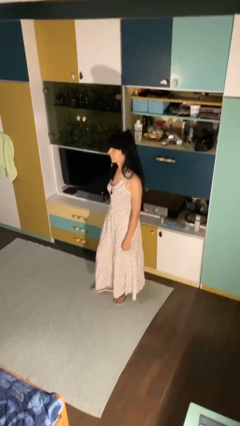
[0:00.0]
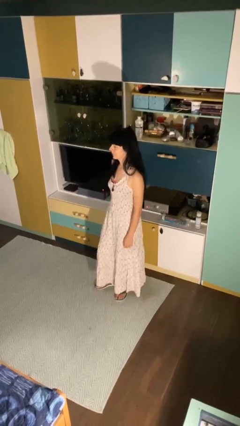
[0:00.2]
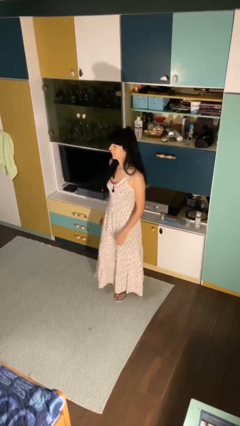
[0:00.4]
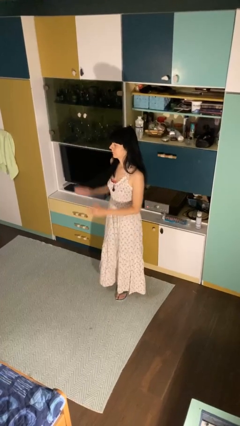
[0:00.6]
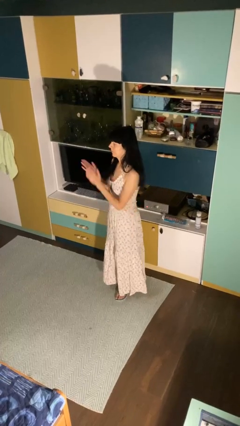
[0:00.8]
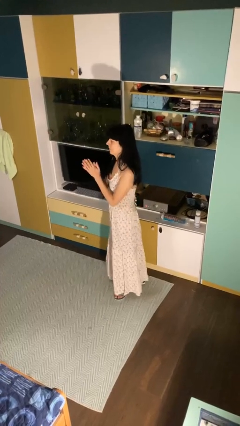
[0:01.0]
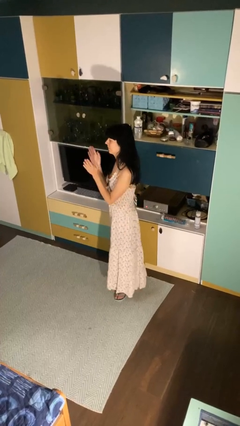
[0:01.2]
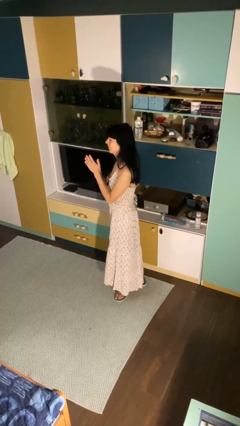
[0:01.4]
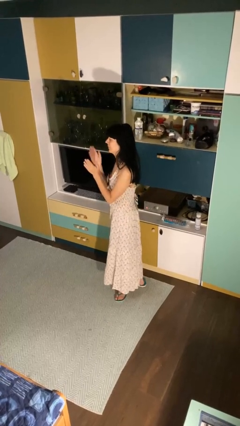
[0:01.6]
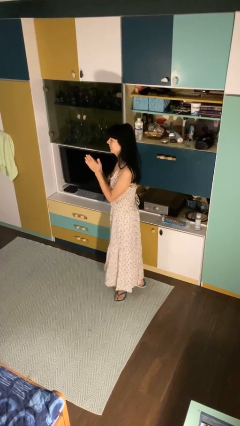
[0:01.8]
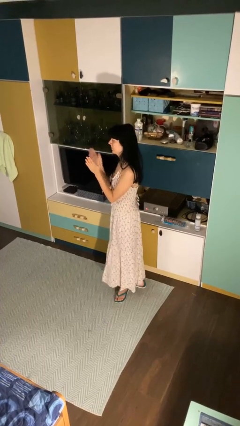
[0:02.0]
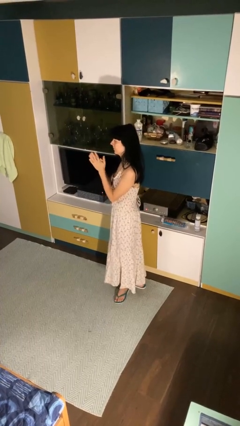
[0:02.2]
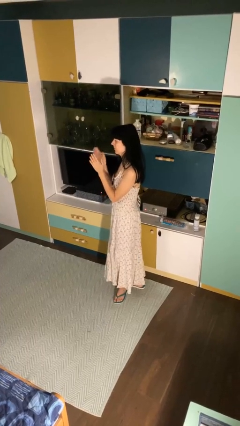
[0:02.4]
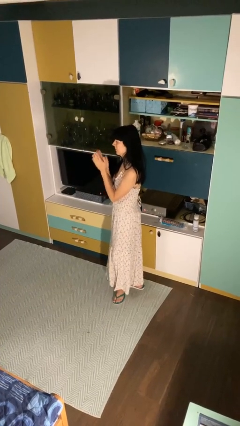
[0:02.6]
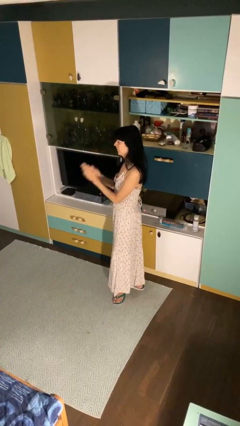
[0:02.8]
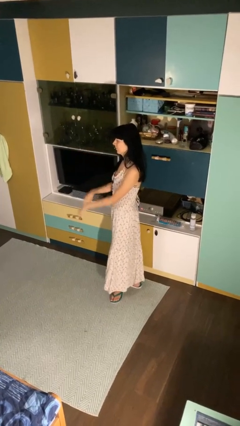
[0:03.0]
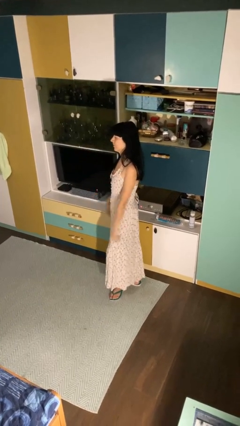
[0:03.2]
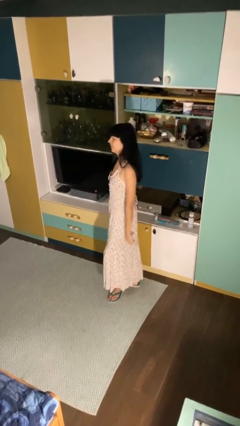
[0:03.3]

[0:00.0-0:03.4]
person claps hands

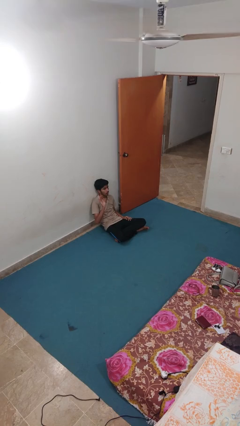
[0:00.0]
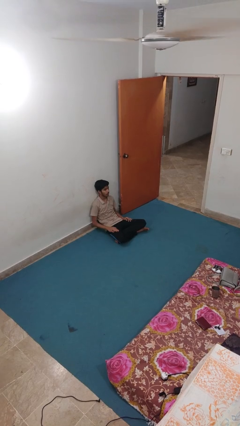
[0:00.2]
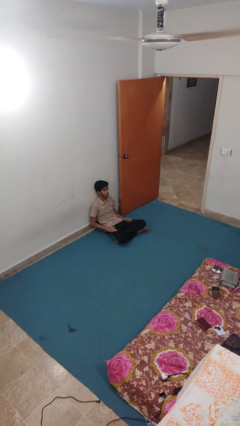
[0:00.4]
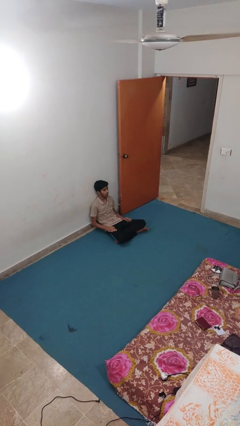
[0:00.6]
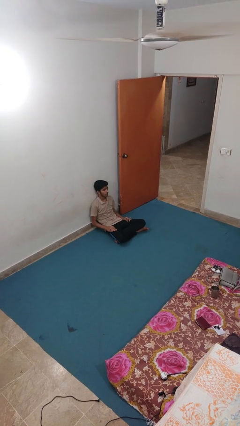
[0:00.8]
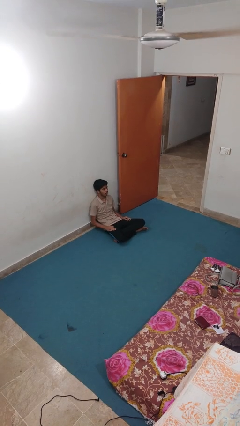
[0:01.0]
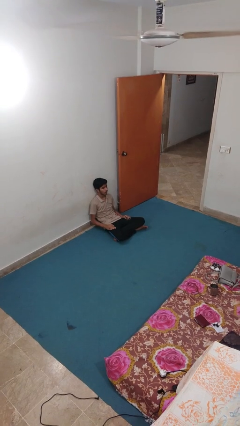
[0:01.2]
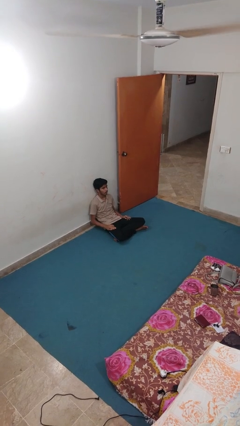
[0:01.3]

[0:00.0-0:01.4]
person slaps hands on thighs

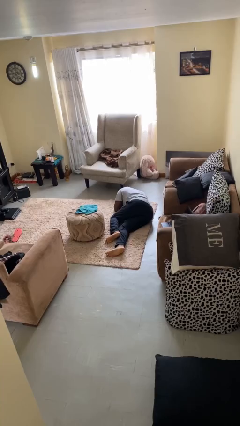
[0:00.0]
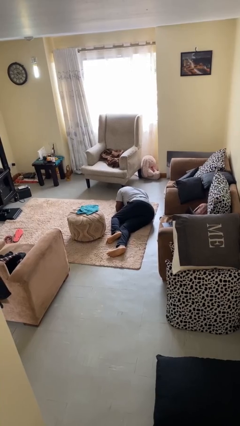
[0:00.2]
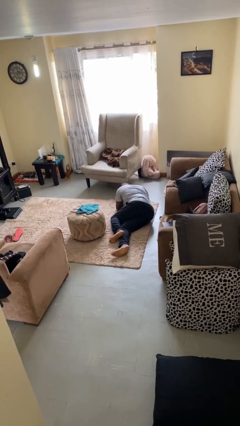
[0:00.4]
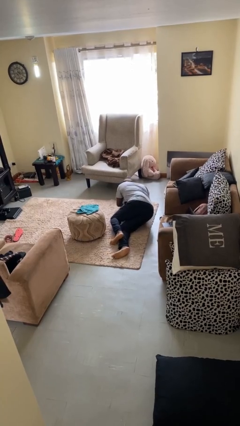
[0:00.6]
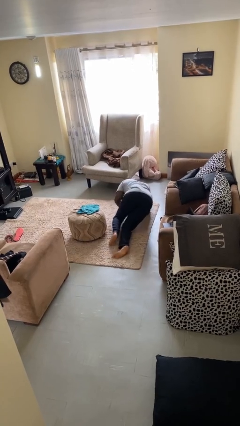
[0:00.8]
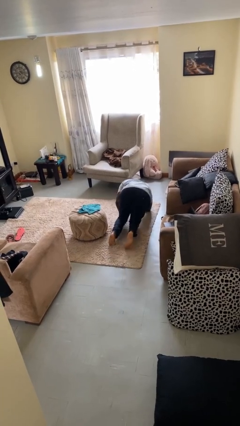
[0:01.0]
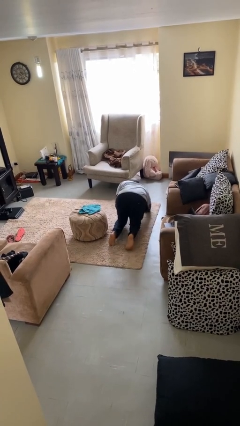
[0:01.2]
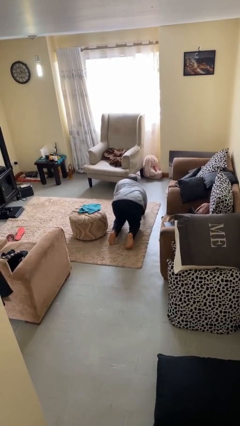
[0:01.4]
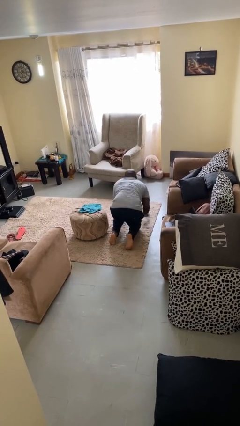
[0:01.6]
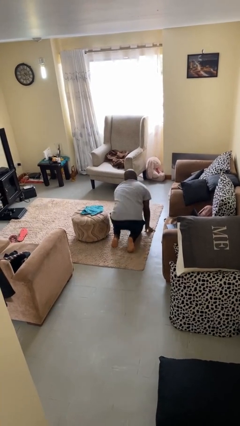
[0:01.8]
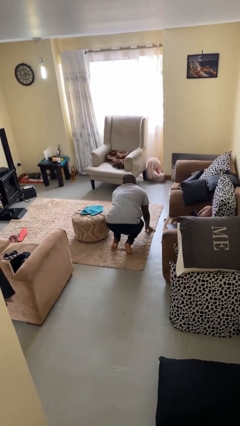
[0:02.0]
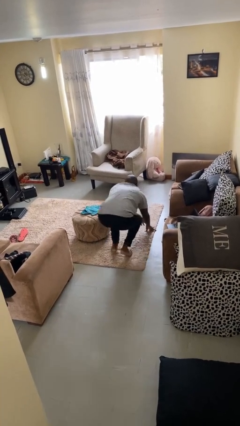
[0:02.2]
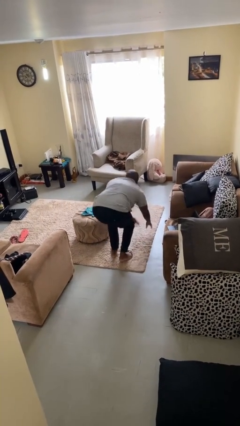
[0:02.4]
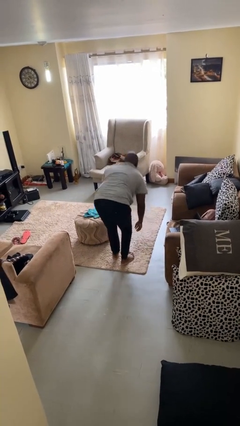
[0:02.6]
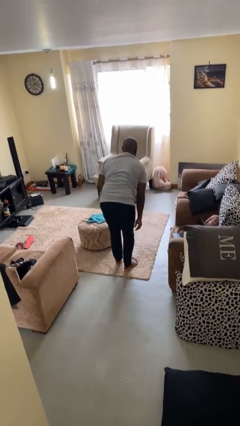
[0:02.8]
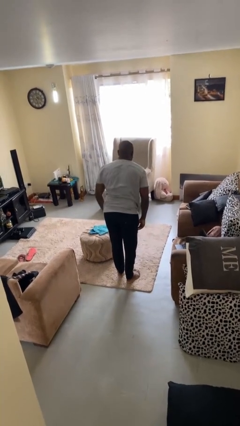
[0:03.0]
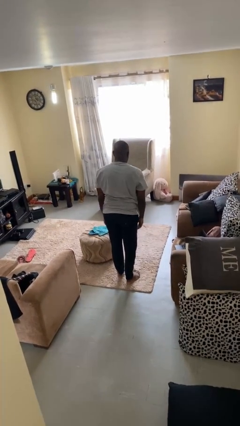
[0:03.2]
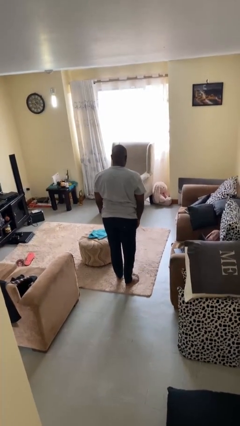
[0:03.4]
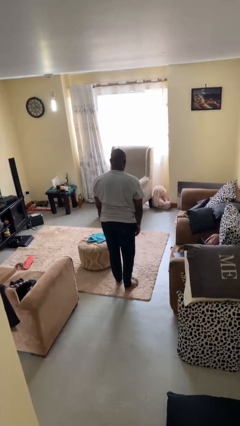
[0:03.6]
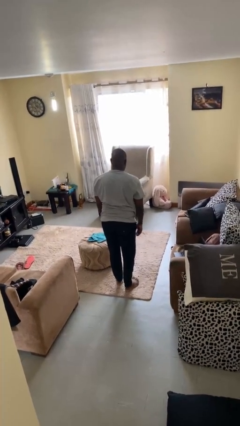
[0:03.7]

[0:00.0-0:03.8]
person stands up from floor

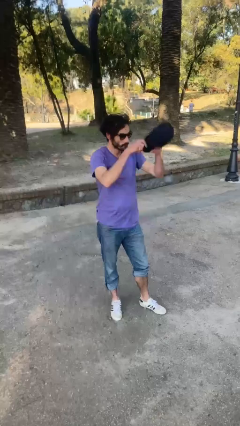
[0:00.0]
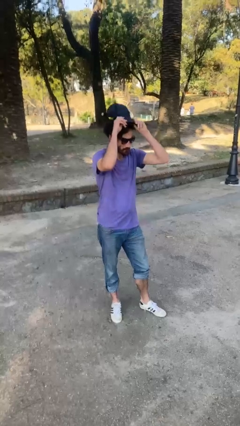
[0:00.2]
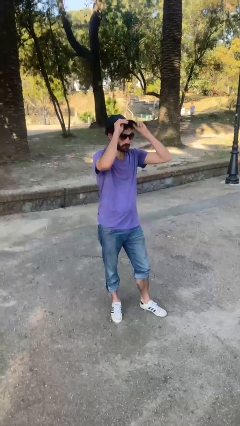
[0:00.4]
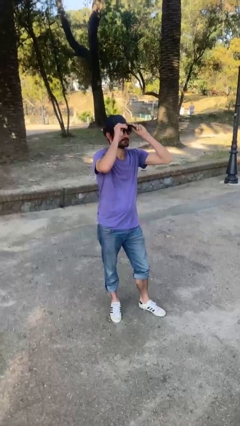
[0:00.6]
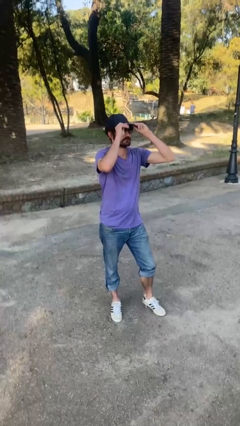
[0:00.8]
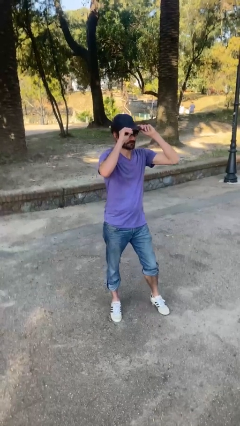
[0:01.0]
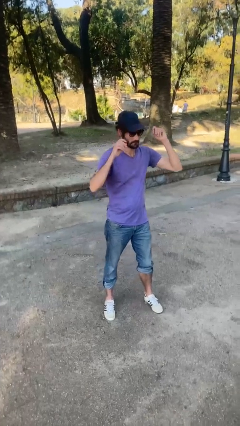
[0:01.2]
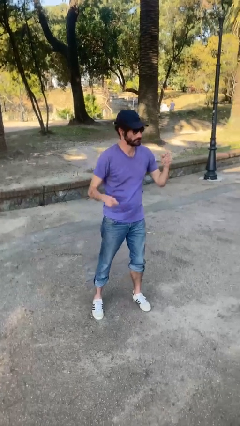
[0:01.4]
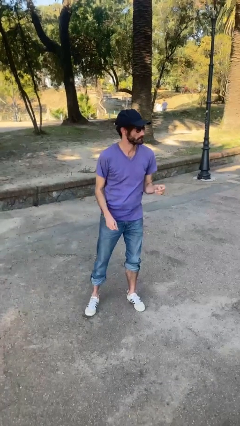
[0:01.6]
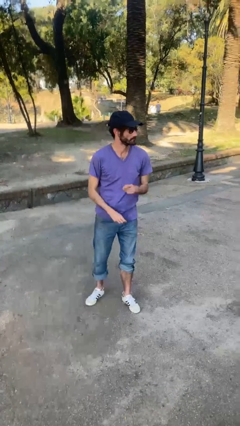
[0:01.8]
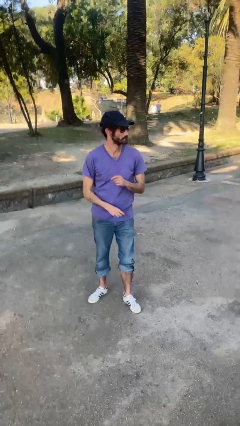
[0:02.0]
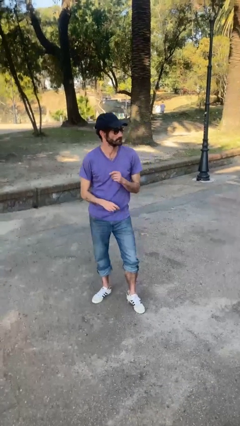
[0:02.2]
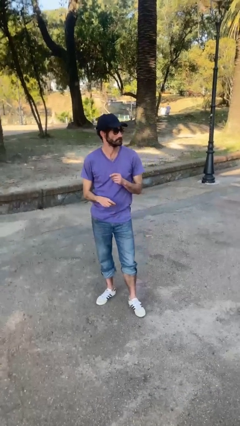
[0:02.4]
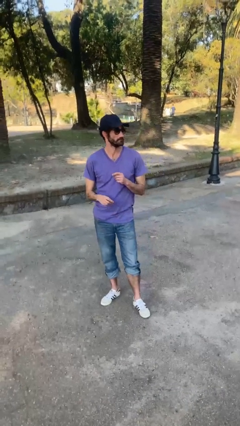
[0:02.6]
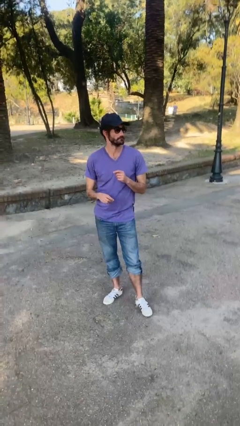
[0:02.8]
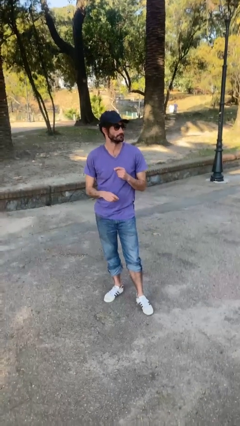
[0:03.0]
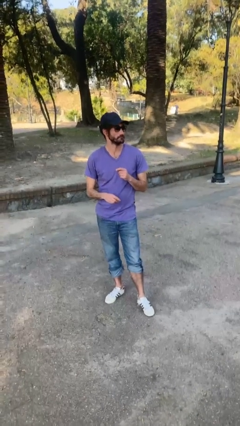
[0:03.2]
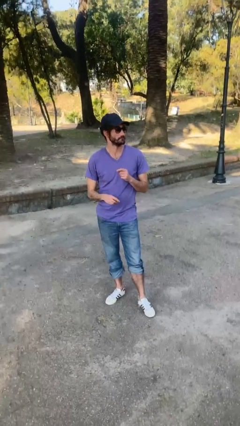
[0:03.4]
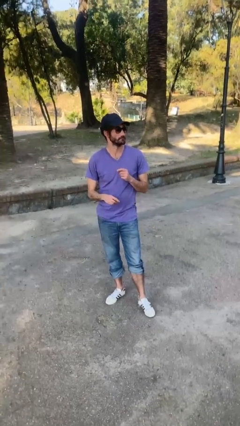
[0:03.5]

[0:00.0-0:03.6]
person puts on hat

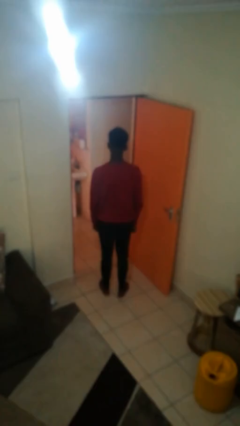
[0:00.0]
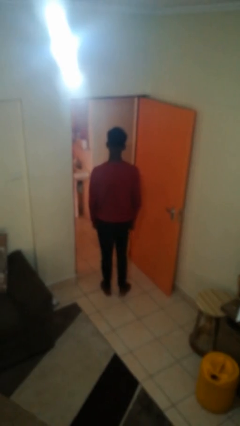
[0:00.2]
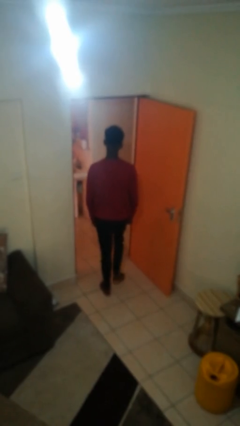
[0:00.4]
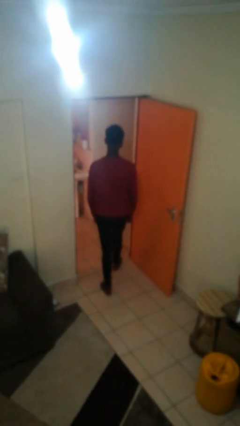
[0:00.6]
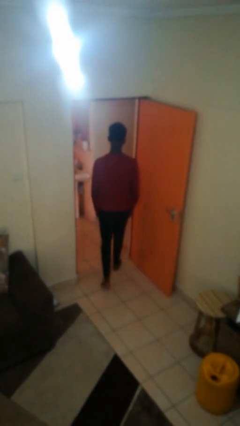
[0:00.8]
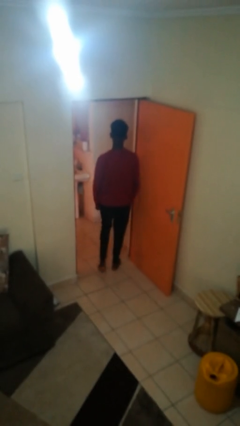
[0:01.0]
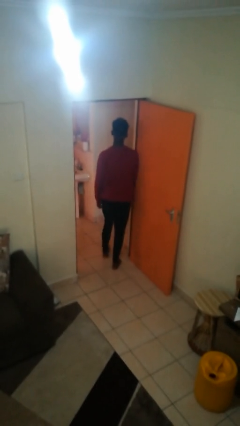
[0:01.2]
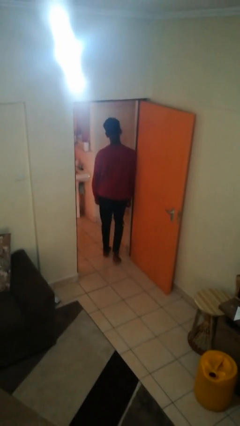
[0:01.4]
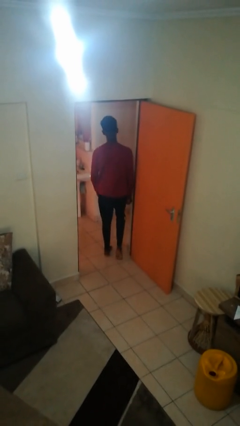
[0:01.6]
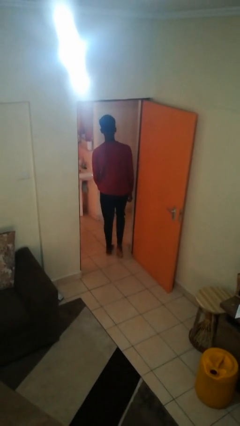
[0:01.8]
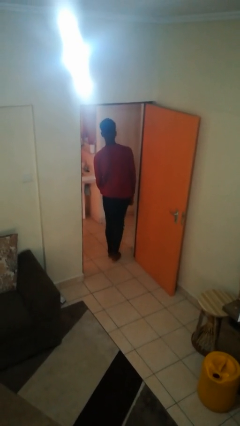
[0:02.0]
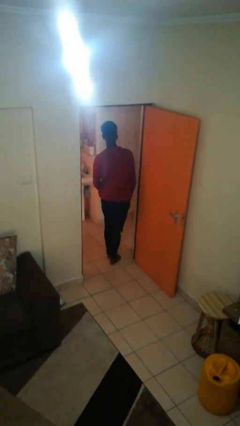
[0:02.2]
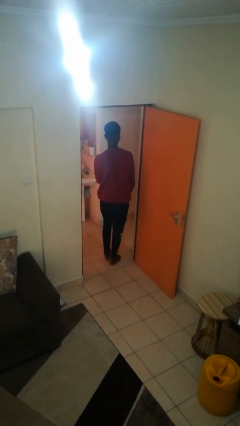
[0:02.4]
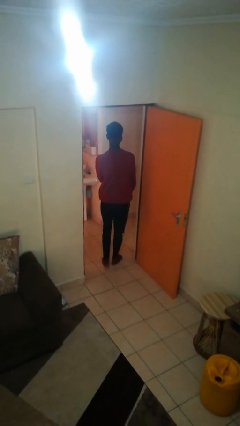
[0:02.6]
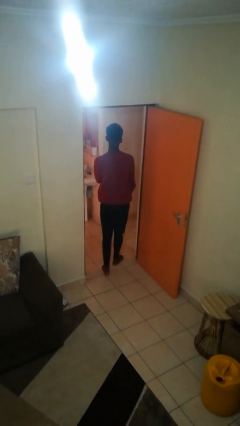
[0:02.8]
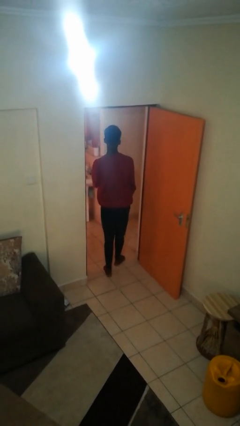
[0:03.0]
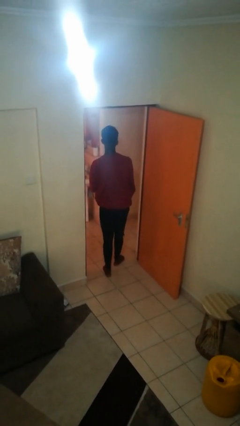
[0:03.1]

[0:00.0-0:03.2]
person bumps into wall

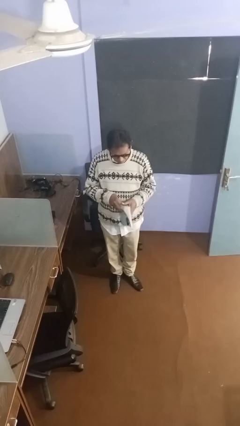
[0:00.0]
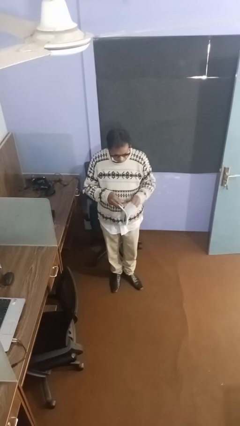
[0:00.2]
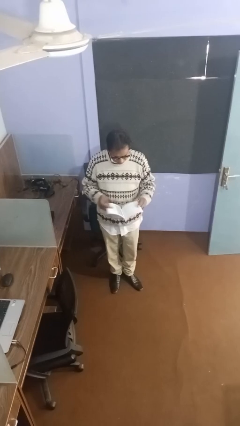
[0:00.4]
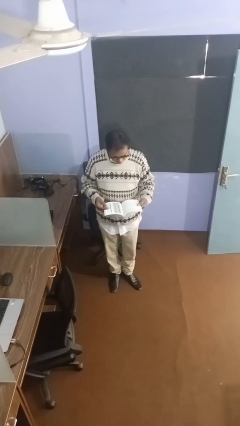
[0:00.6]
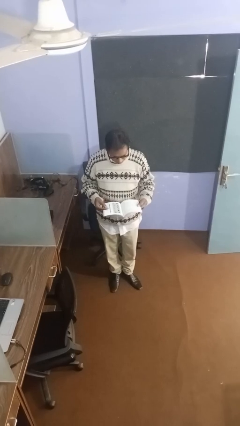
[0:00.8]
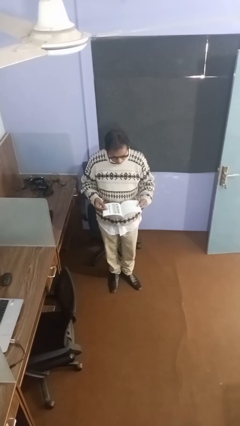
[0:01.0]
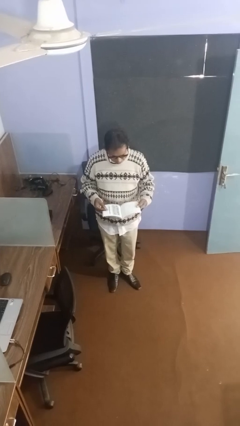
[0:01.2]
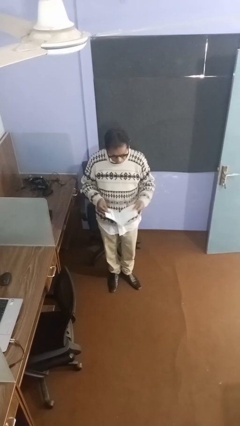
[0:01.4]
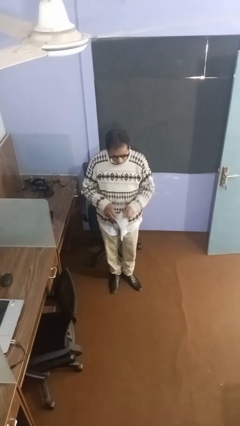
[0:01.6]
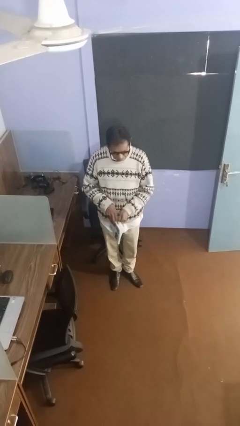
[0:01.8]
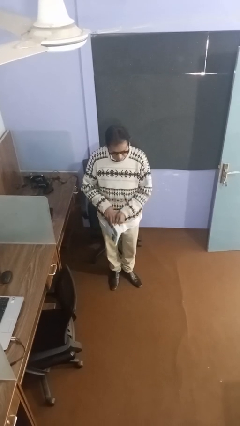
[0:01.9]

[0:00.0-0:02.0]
person reads document
